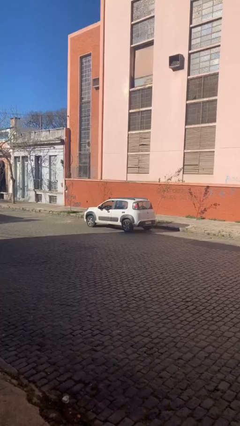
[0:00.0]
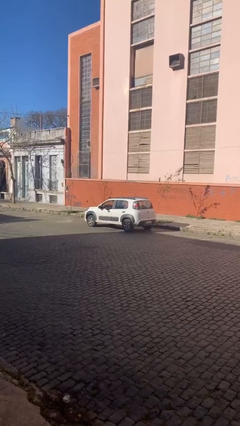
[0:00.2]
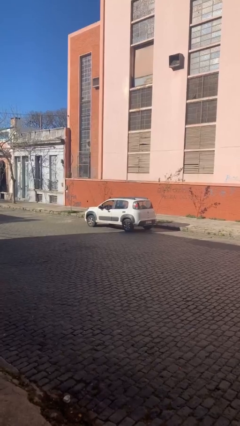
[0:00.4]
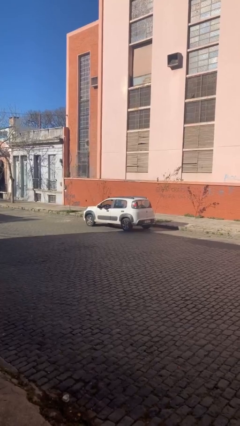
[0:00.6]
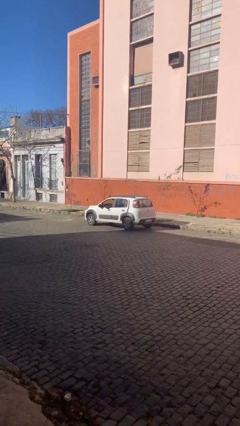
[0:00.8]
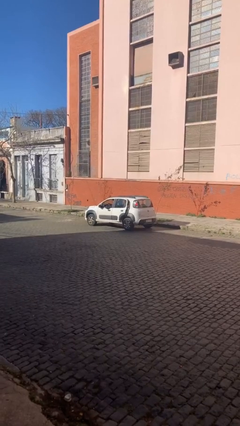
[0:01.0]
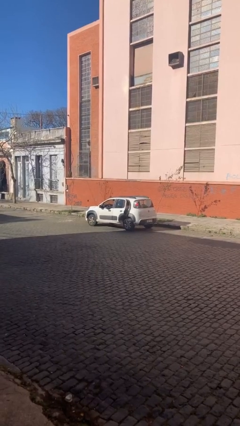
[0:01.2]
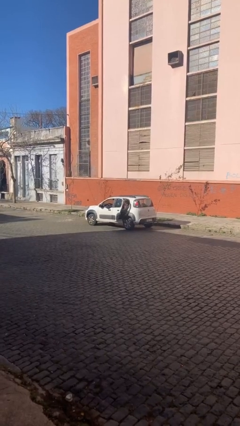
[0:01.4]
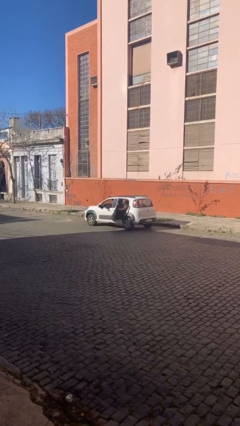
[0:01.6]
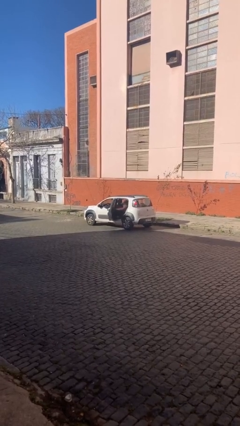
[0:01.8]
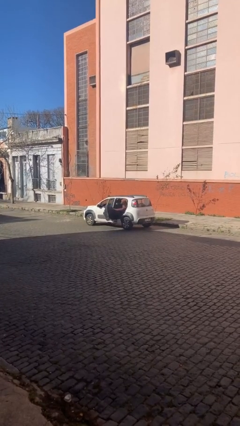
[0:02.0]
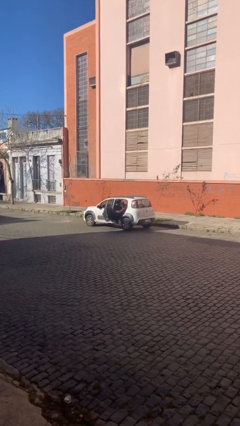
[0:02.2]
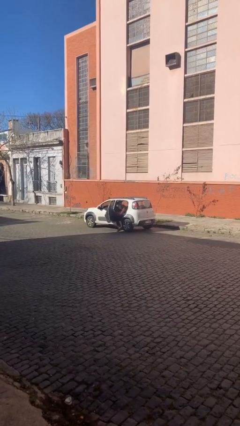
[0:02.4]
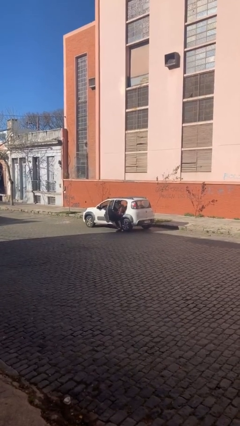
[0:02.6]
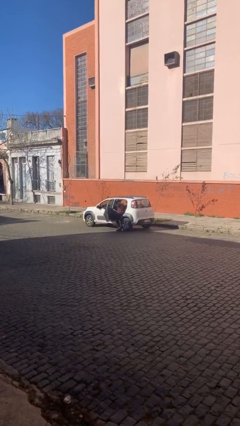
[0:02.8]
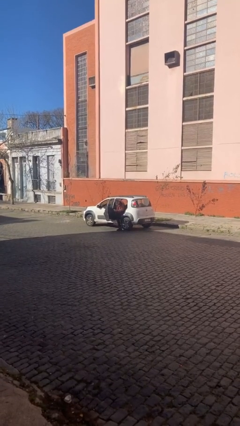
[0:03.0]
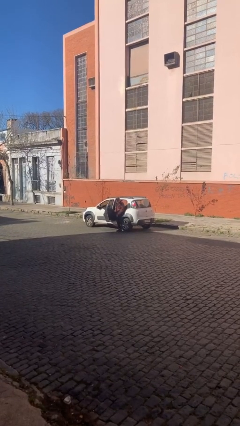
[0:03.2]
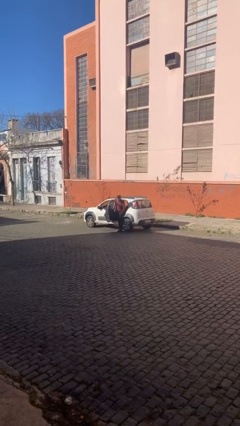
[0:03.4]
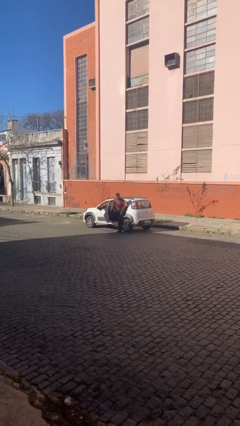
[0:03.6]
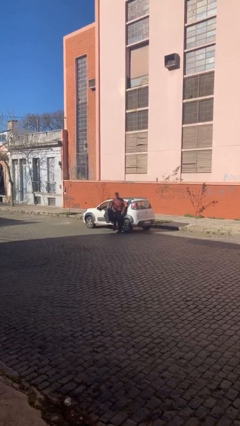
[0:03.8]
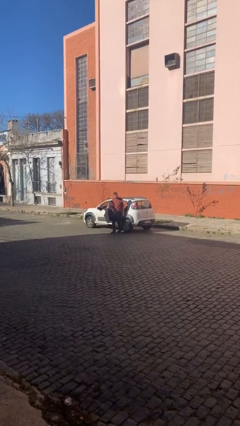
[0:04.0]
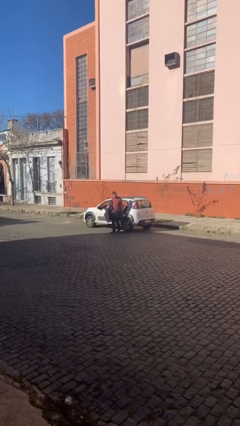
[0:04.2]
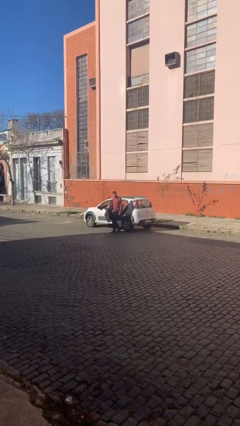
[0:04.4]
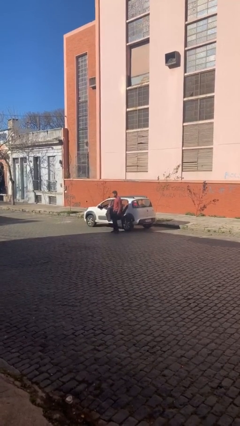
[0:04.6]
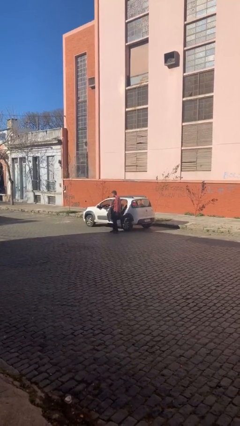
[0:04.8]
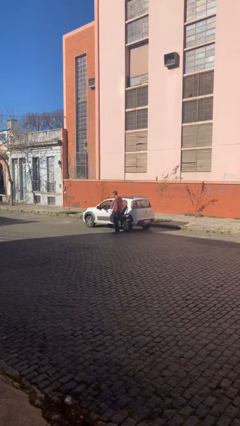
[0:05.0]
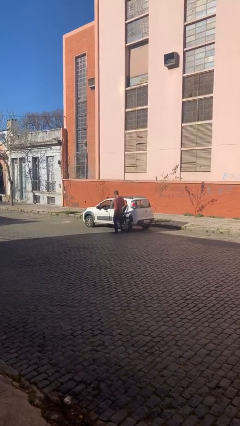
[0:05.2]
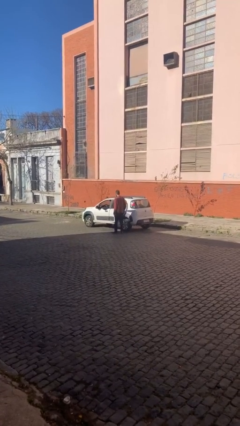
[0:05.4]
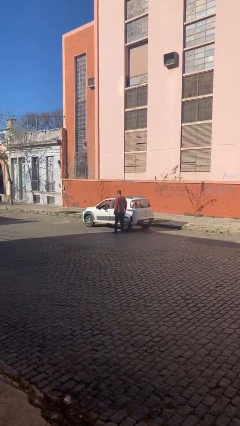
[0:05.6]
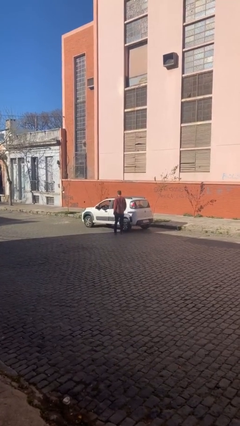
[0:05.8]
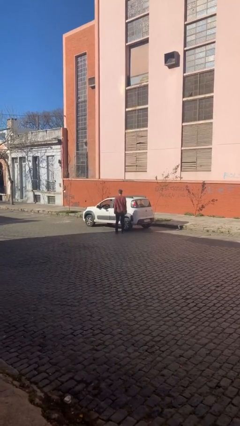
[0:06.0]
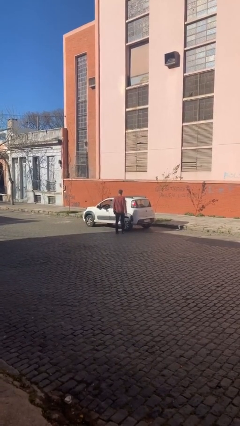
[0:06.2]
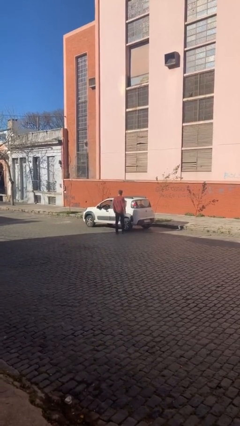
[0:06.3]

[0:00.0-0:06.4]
car drops off person

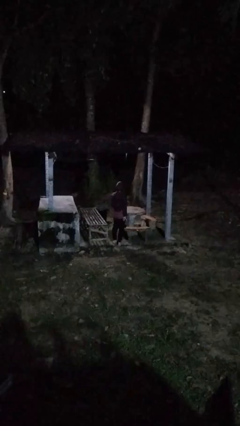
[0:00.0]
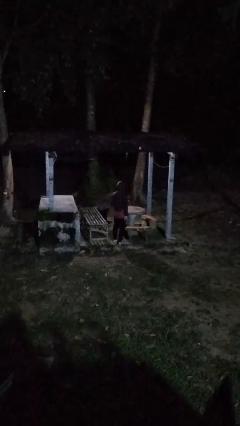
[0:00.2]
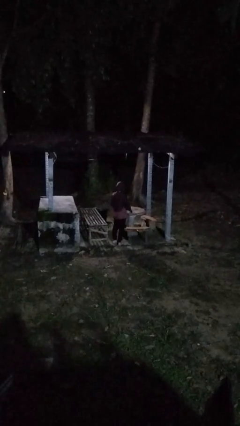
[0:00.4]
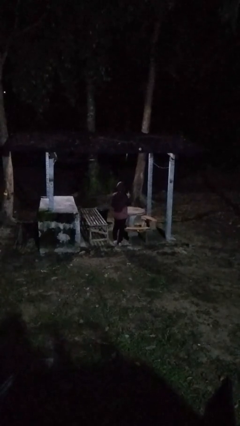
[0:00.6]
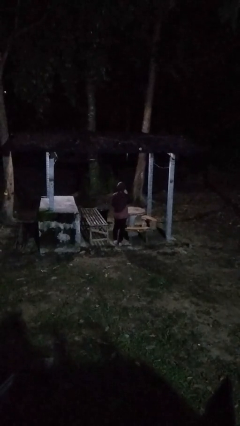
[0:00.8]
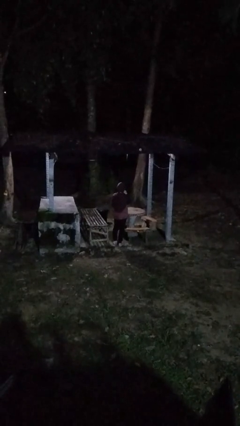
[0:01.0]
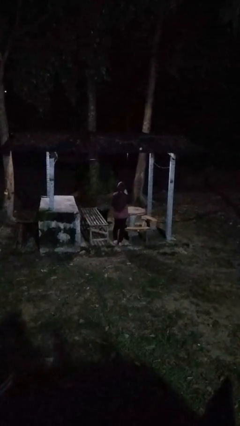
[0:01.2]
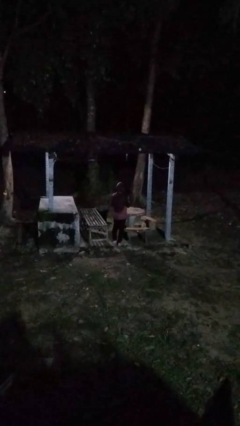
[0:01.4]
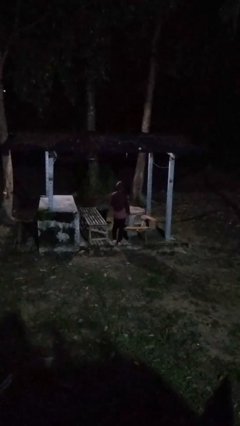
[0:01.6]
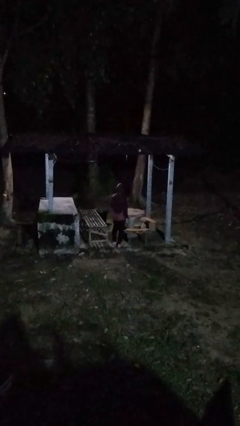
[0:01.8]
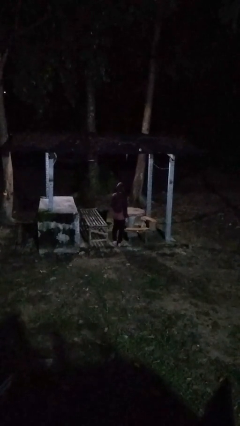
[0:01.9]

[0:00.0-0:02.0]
person gestures be quiet

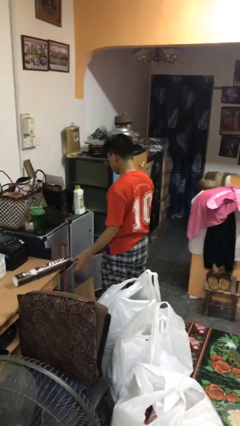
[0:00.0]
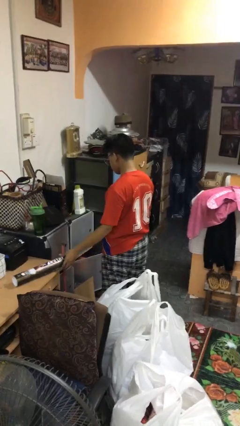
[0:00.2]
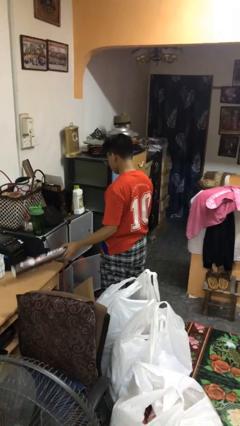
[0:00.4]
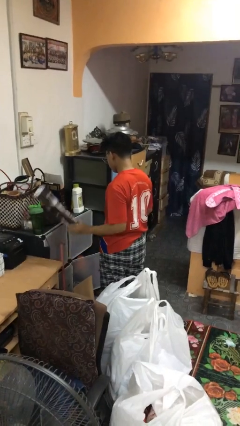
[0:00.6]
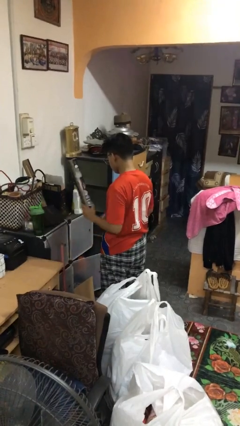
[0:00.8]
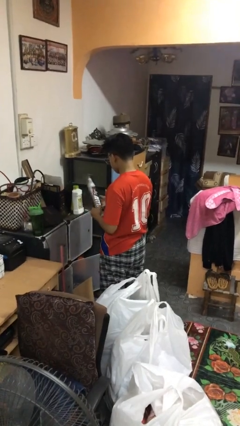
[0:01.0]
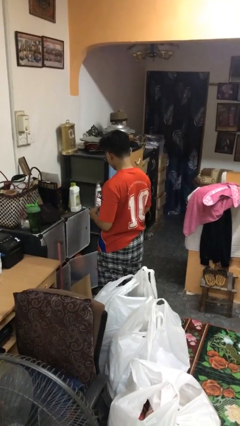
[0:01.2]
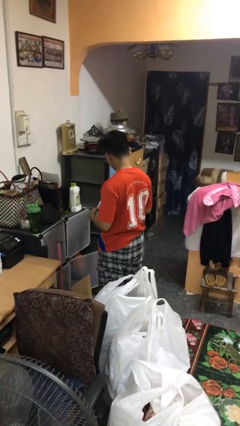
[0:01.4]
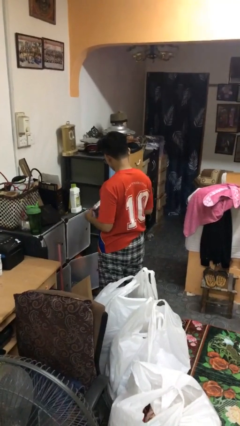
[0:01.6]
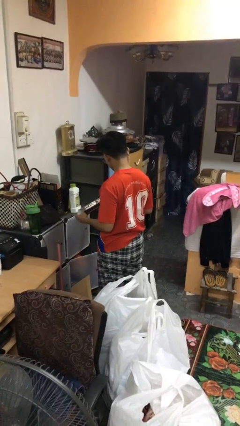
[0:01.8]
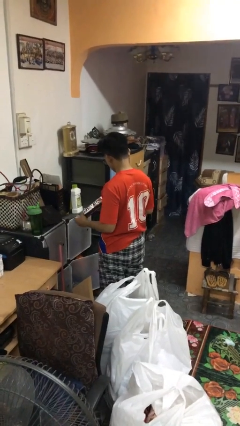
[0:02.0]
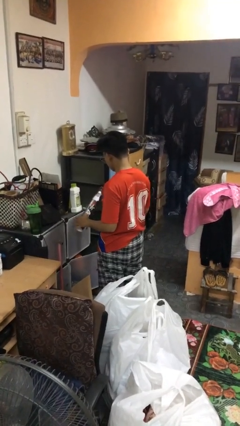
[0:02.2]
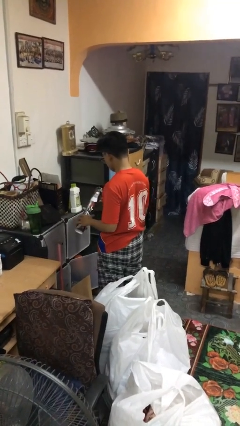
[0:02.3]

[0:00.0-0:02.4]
person picks up object from countertop

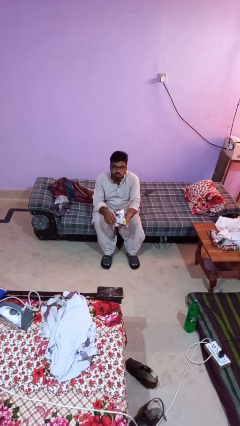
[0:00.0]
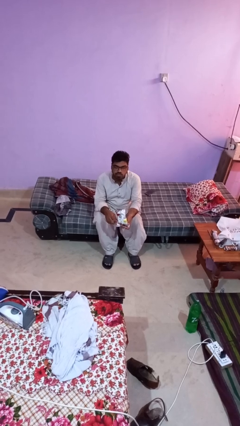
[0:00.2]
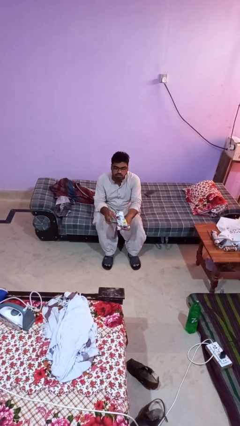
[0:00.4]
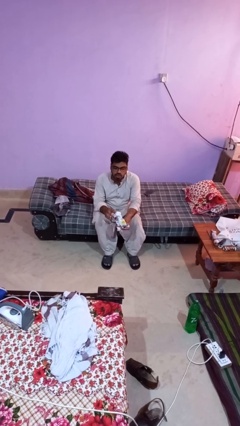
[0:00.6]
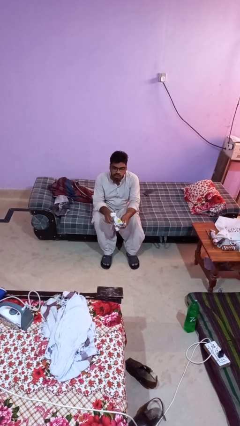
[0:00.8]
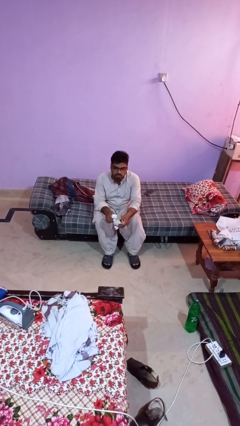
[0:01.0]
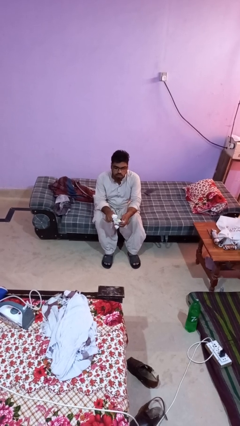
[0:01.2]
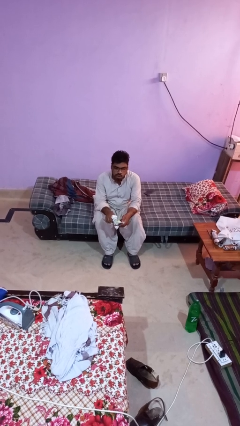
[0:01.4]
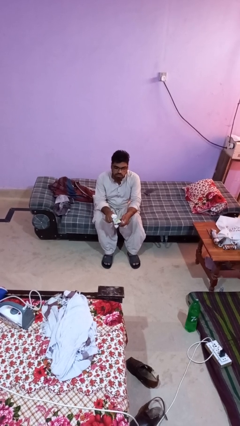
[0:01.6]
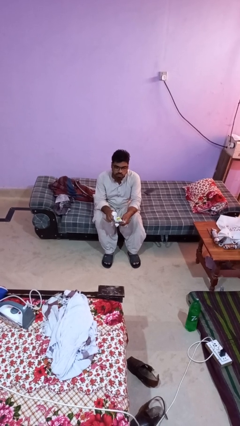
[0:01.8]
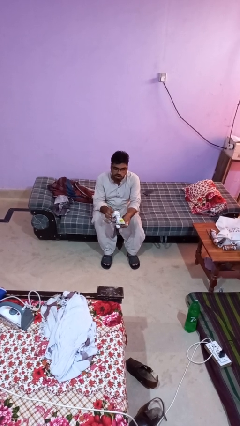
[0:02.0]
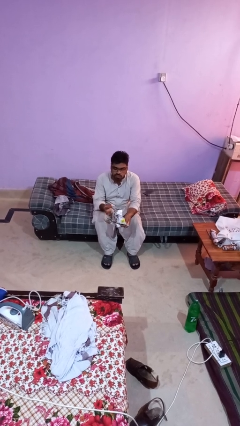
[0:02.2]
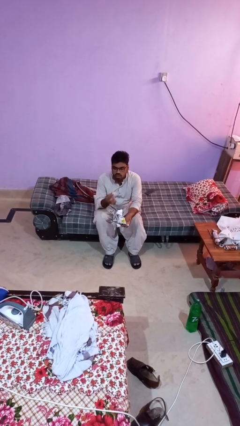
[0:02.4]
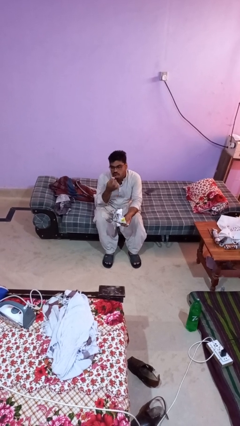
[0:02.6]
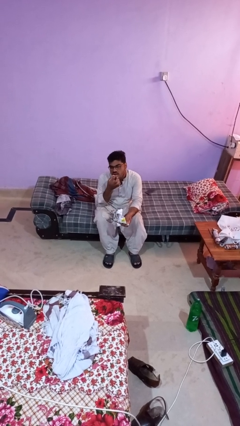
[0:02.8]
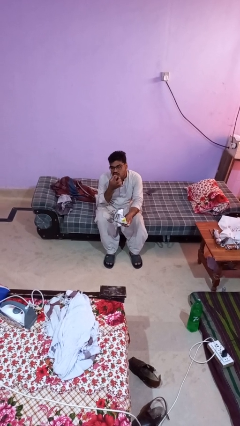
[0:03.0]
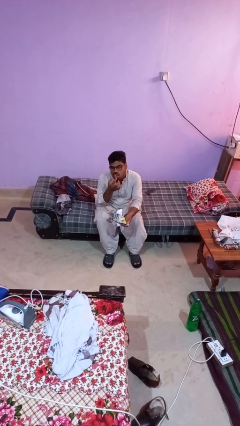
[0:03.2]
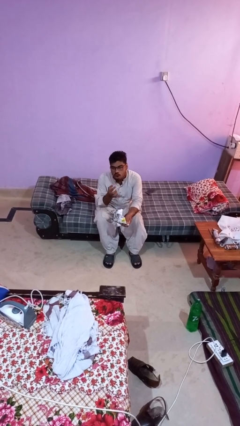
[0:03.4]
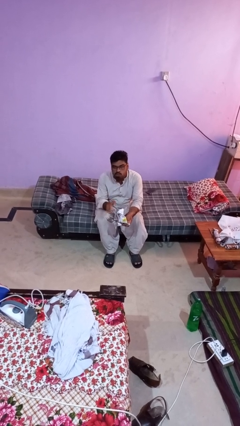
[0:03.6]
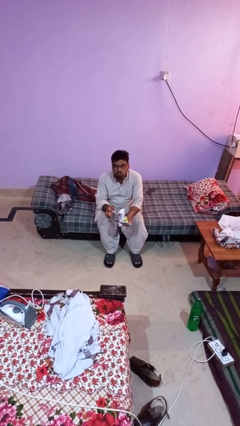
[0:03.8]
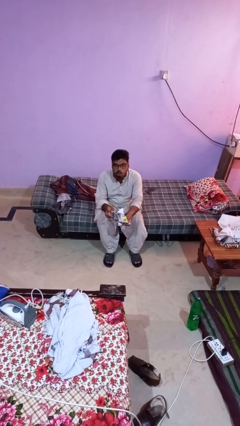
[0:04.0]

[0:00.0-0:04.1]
person eats snack from bag

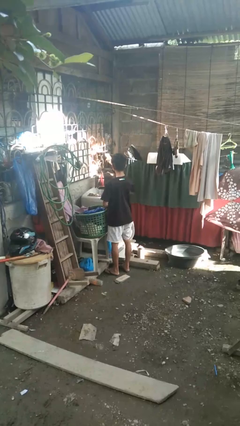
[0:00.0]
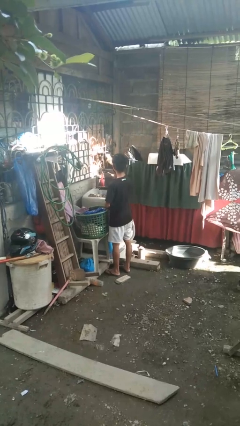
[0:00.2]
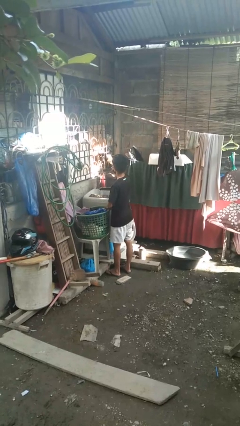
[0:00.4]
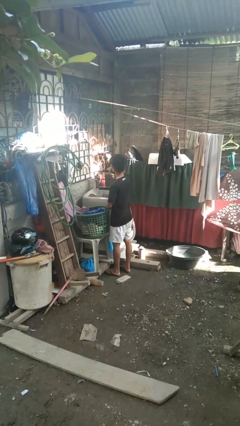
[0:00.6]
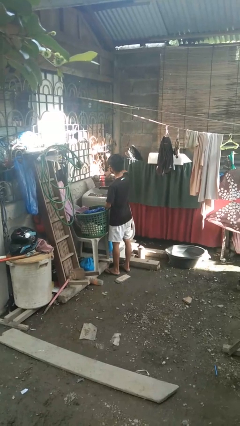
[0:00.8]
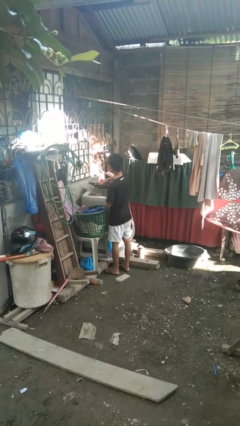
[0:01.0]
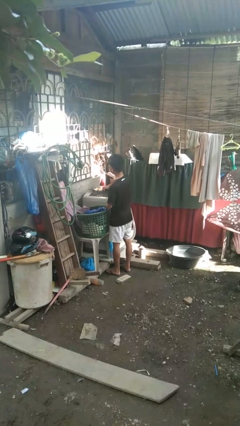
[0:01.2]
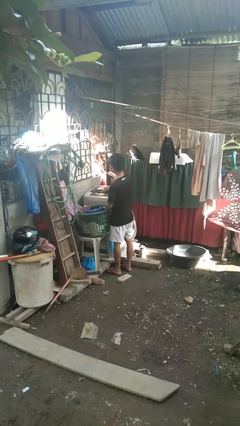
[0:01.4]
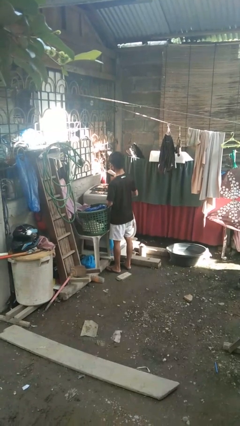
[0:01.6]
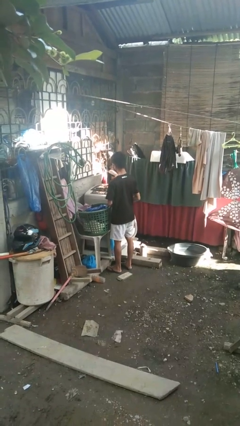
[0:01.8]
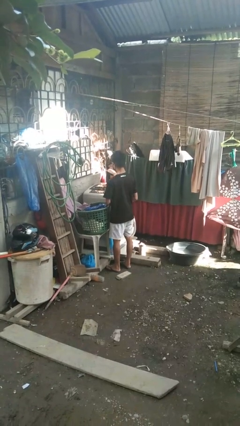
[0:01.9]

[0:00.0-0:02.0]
person closes clothes washer

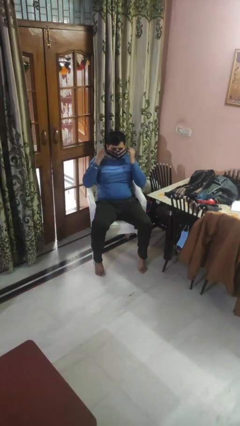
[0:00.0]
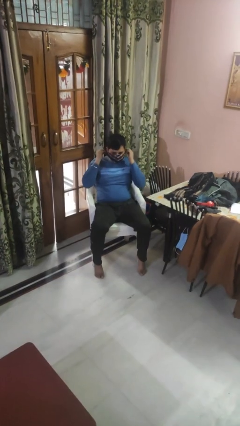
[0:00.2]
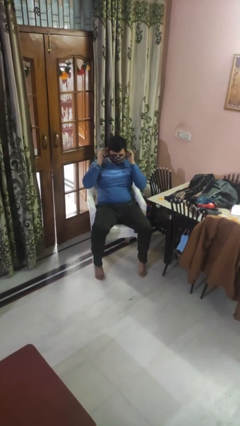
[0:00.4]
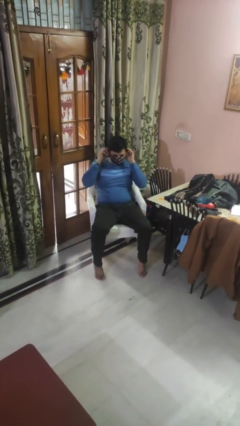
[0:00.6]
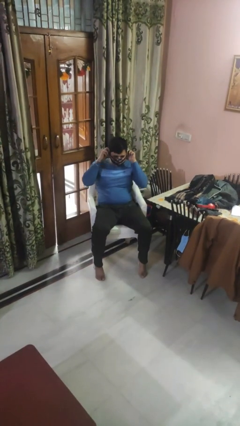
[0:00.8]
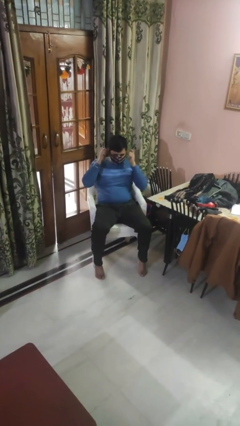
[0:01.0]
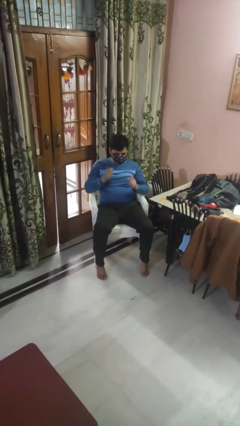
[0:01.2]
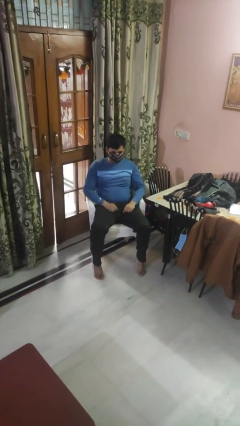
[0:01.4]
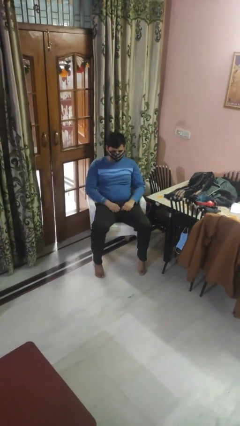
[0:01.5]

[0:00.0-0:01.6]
person puts on facemask
